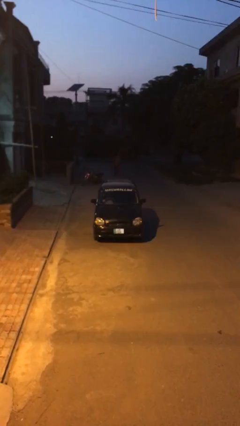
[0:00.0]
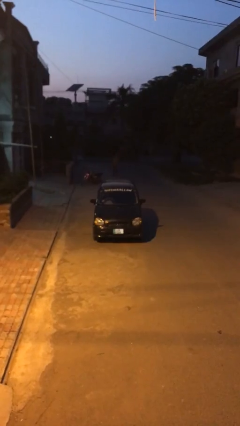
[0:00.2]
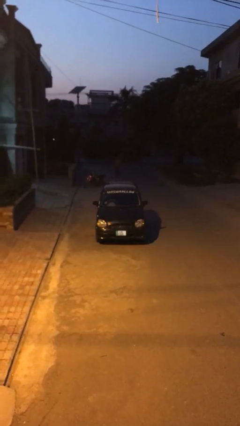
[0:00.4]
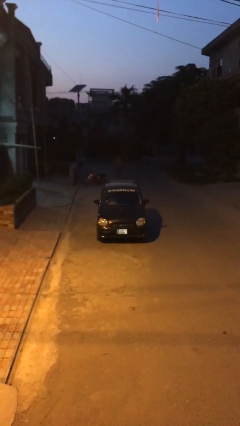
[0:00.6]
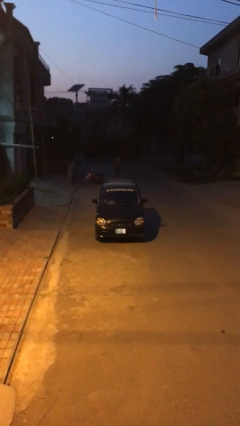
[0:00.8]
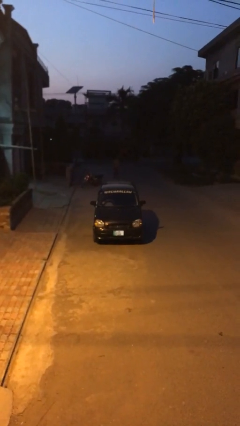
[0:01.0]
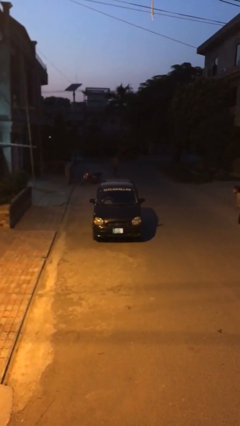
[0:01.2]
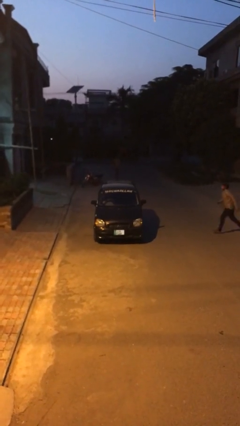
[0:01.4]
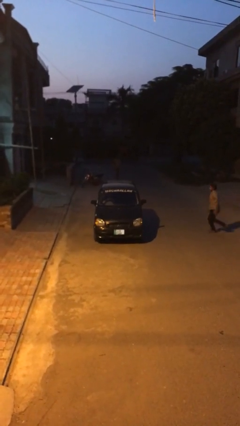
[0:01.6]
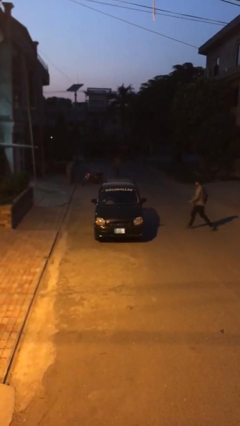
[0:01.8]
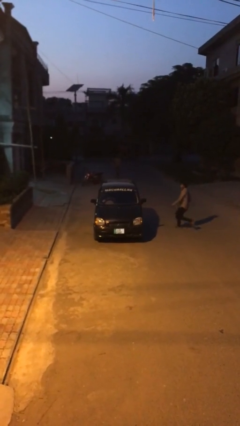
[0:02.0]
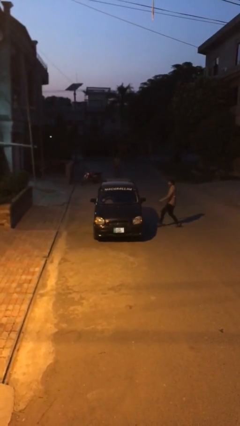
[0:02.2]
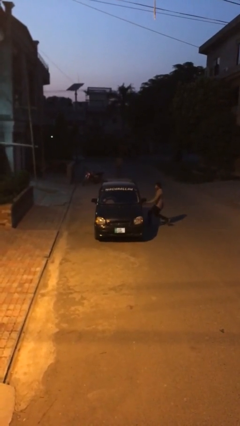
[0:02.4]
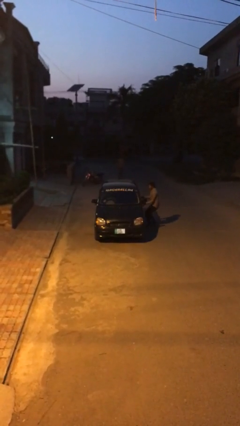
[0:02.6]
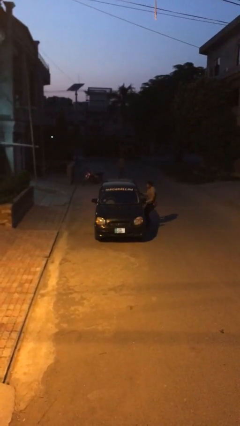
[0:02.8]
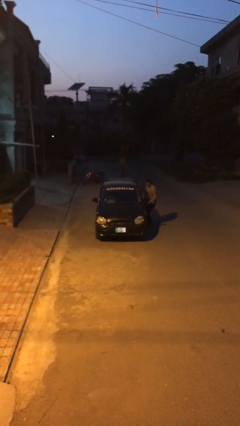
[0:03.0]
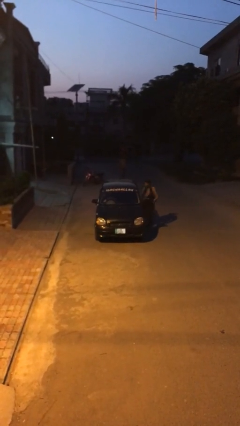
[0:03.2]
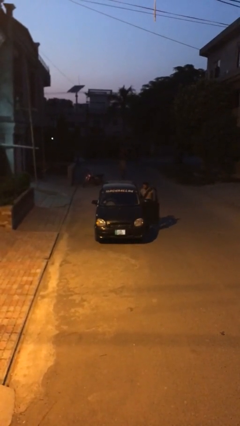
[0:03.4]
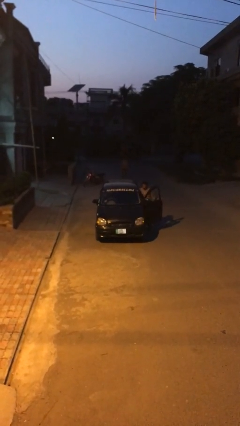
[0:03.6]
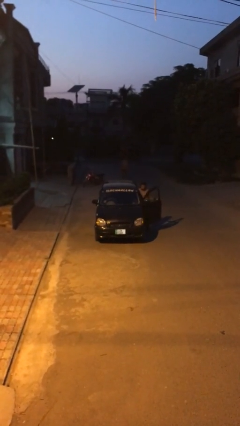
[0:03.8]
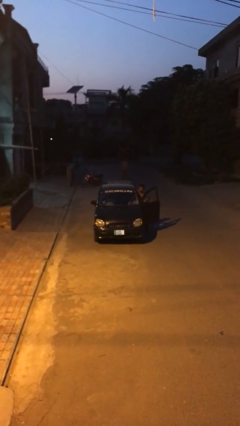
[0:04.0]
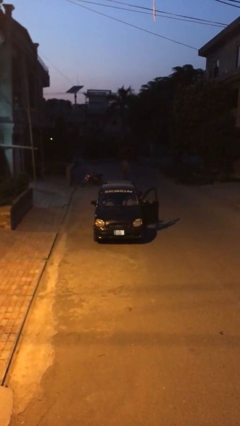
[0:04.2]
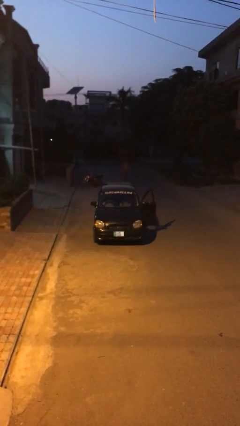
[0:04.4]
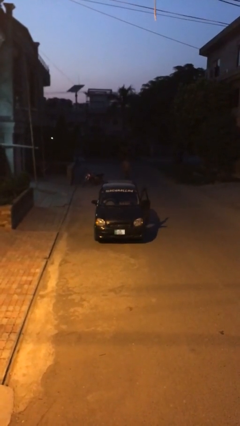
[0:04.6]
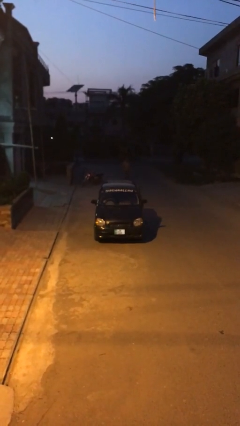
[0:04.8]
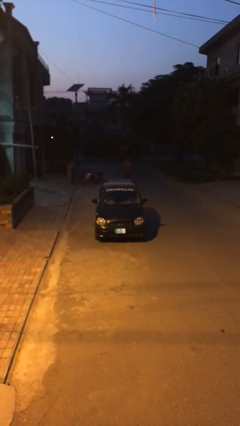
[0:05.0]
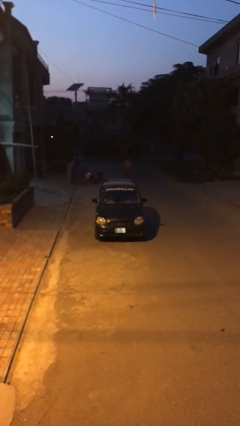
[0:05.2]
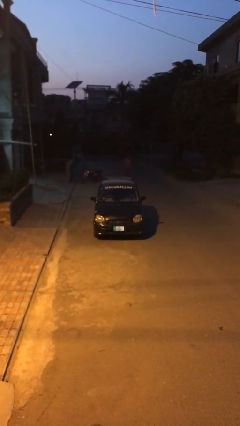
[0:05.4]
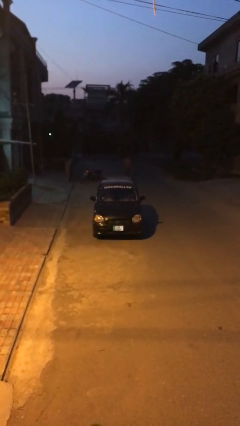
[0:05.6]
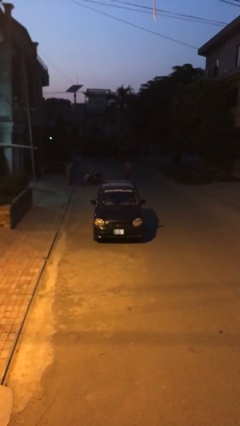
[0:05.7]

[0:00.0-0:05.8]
car picks up person

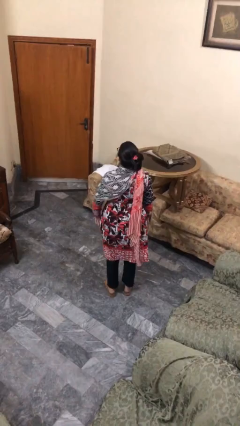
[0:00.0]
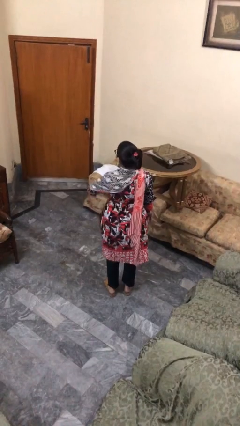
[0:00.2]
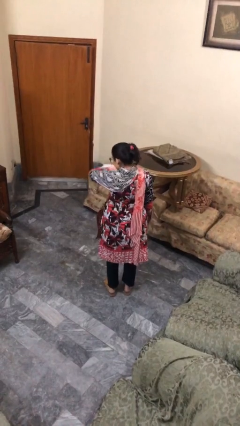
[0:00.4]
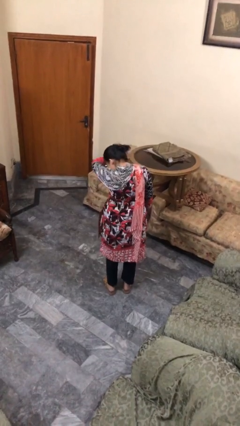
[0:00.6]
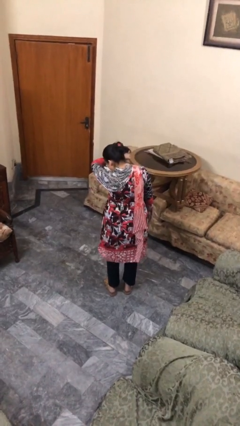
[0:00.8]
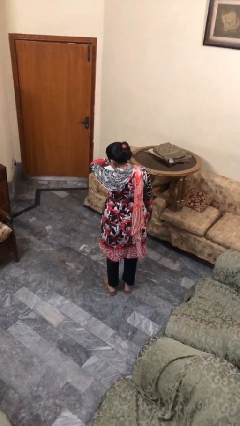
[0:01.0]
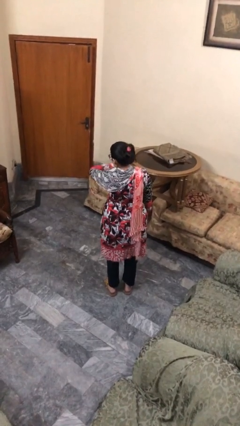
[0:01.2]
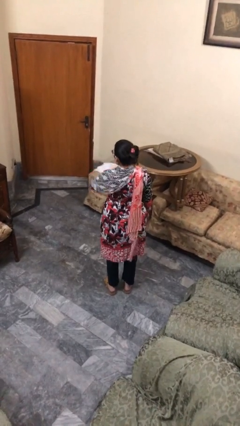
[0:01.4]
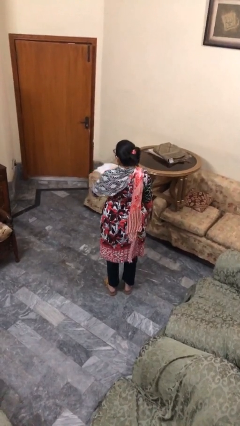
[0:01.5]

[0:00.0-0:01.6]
person sneezes into arm

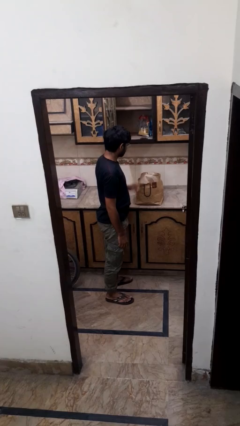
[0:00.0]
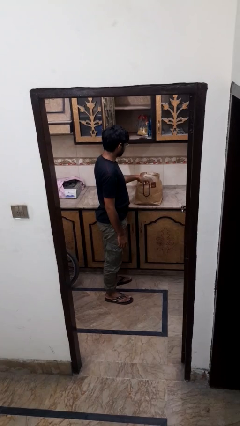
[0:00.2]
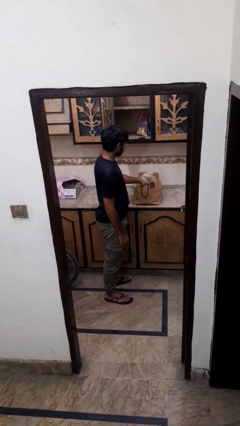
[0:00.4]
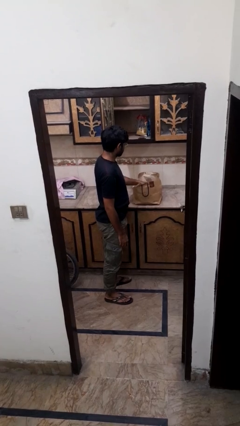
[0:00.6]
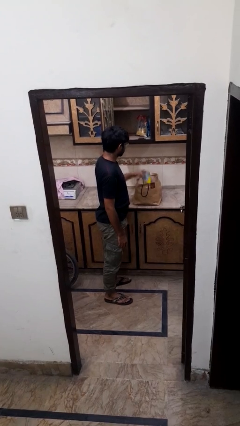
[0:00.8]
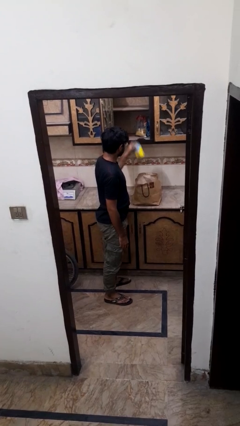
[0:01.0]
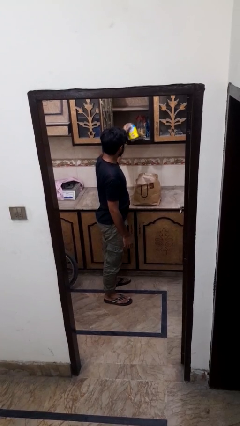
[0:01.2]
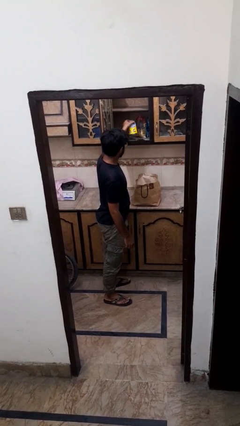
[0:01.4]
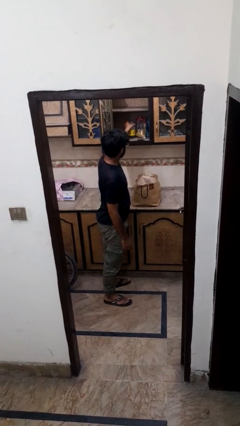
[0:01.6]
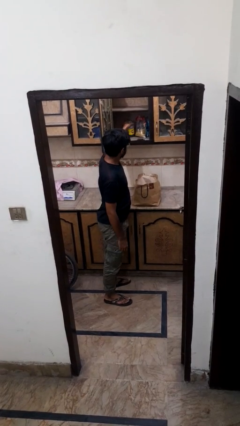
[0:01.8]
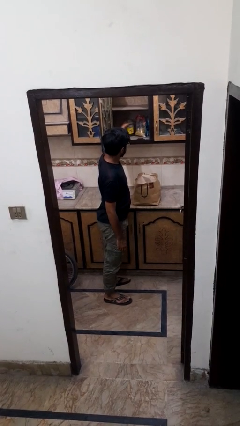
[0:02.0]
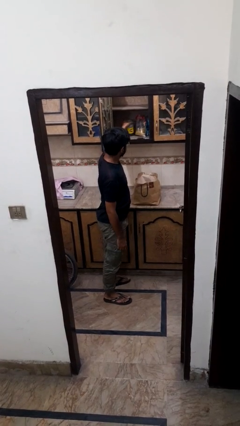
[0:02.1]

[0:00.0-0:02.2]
person loads groceries into cabinet

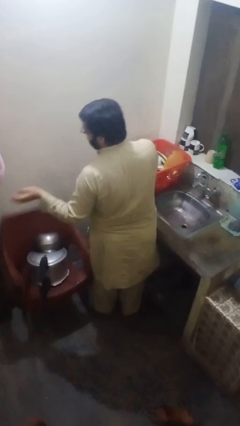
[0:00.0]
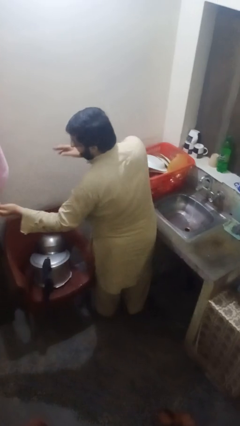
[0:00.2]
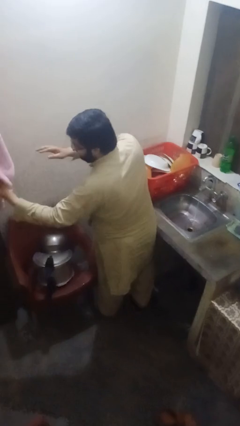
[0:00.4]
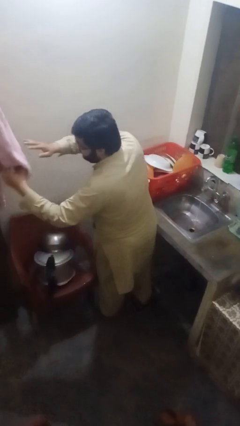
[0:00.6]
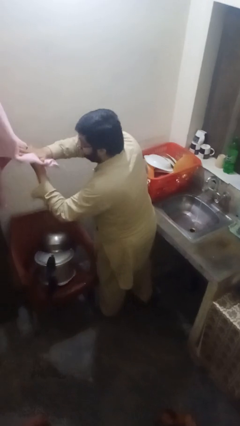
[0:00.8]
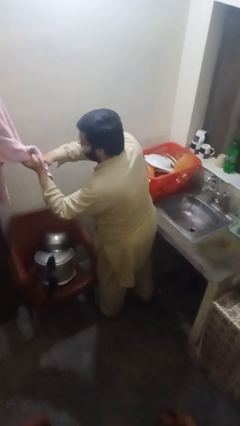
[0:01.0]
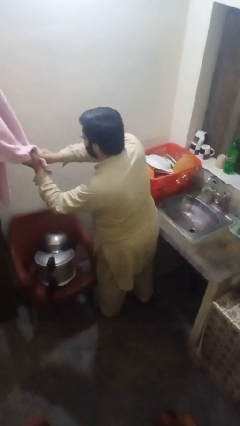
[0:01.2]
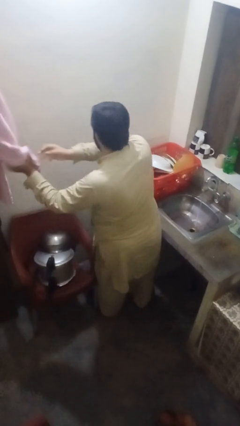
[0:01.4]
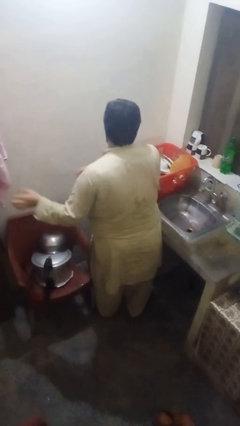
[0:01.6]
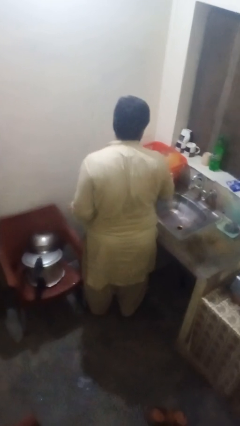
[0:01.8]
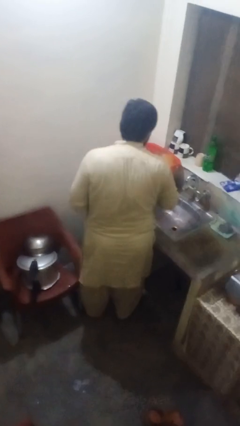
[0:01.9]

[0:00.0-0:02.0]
person dries hands with towel

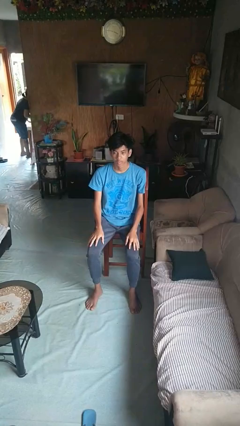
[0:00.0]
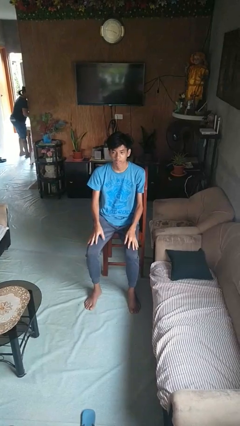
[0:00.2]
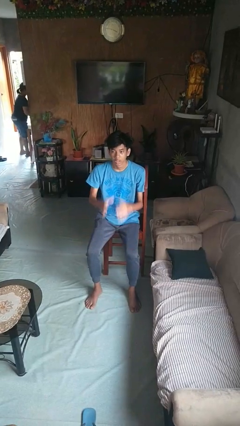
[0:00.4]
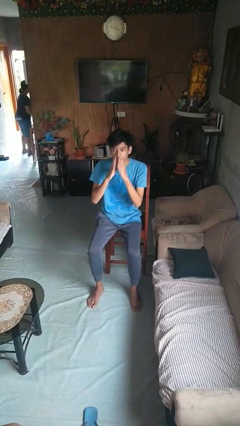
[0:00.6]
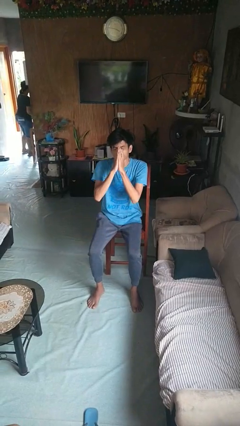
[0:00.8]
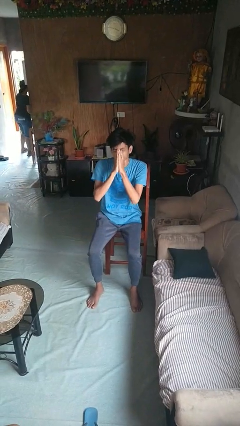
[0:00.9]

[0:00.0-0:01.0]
person sneezes into hand

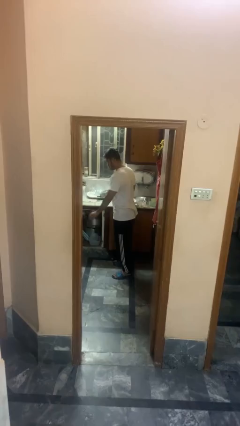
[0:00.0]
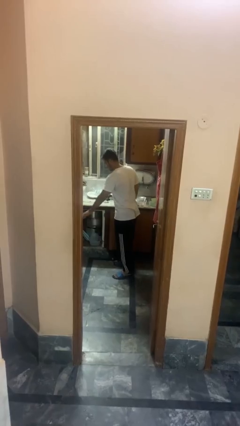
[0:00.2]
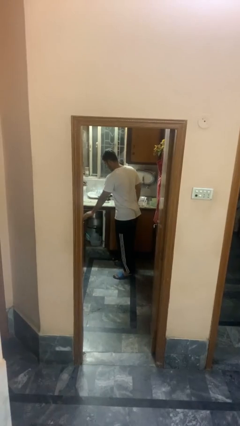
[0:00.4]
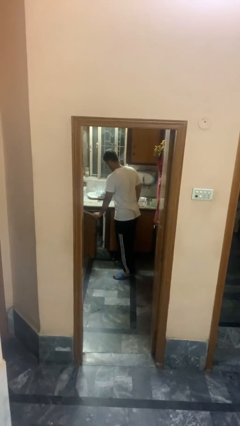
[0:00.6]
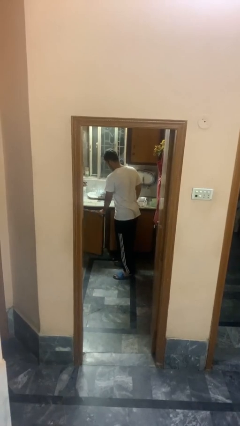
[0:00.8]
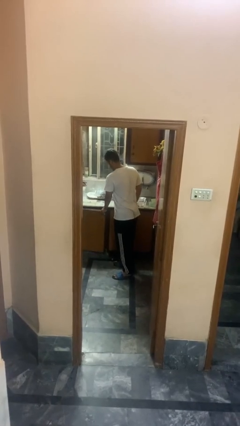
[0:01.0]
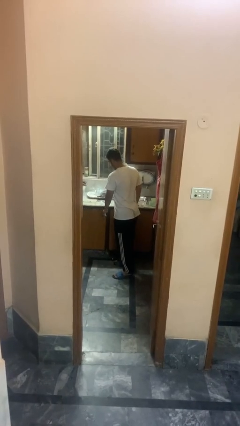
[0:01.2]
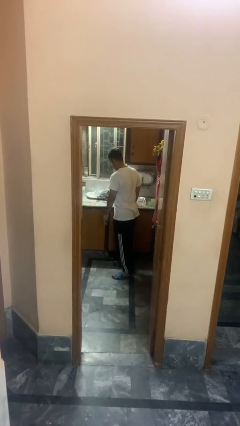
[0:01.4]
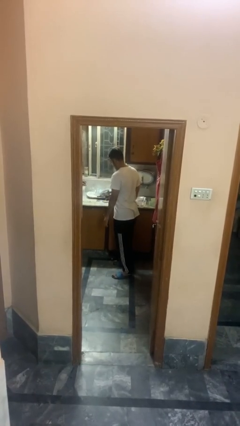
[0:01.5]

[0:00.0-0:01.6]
person closes cabinet

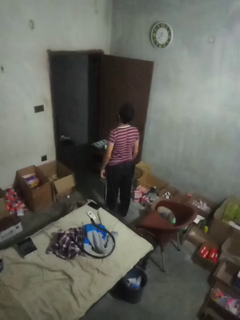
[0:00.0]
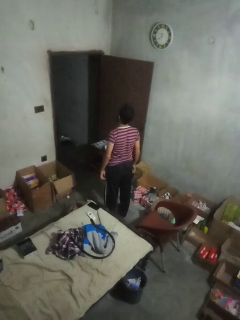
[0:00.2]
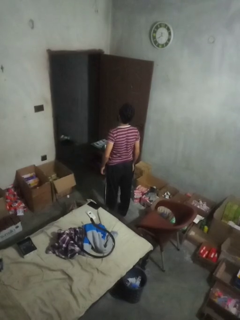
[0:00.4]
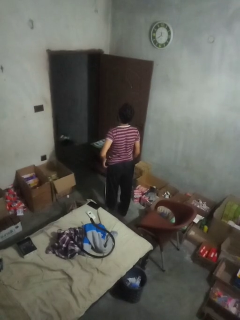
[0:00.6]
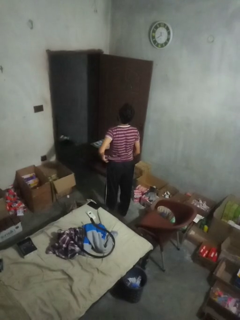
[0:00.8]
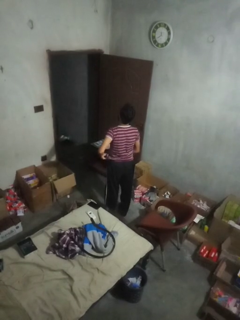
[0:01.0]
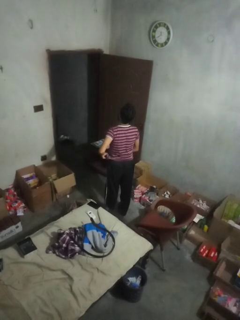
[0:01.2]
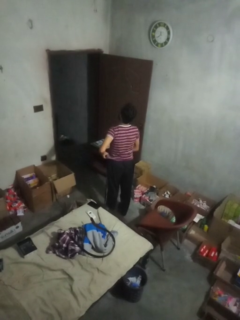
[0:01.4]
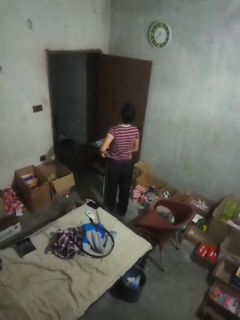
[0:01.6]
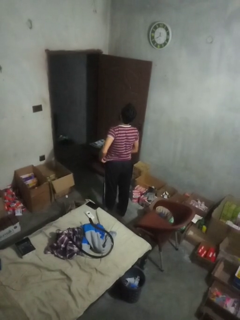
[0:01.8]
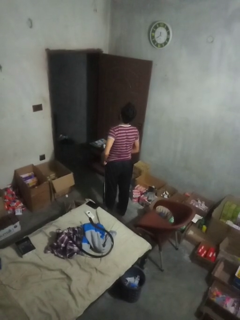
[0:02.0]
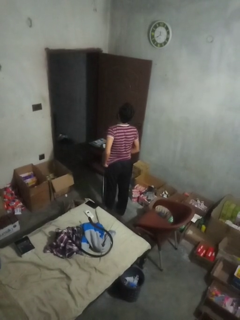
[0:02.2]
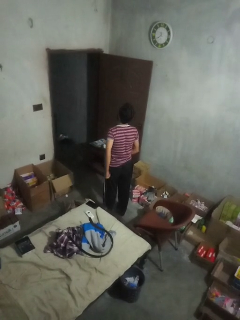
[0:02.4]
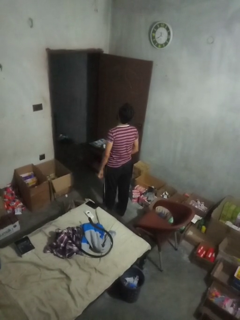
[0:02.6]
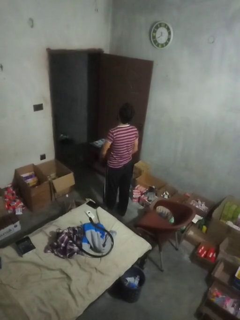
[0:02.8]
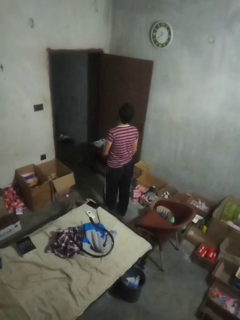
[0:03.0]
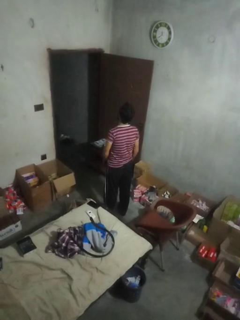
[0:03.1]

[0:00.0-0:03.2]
person hikes up pants
